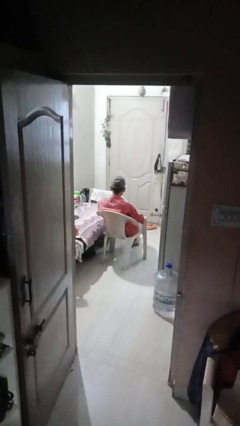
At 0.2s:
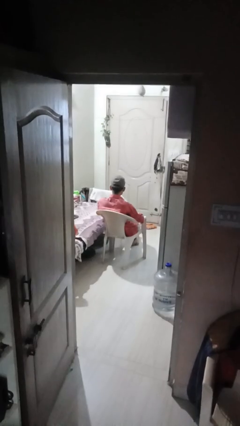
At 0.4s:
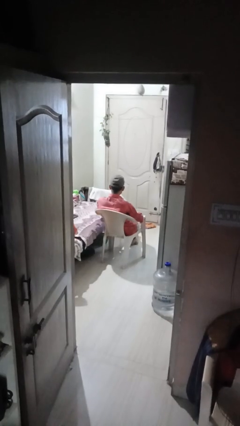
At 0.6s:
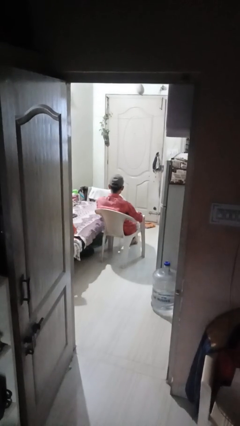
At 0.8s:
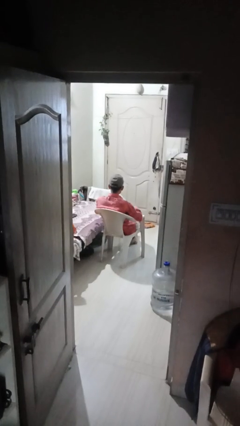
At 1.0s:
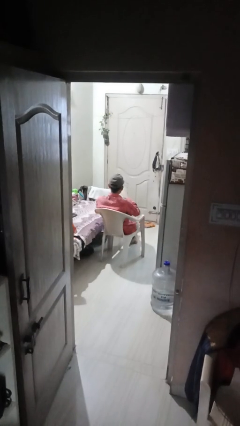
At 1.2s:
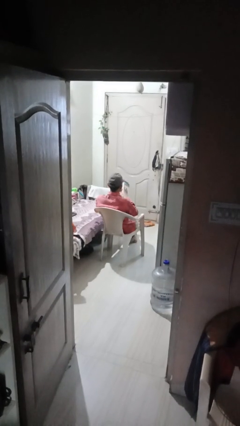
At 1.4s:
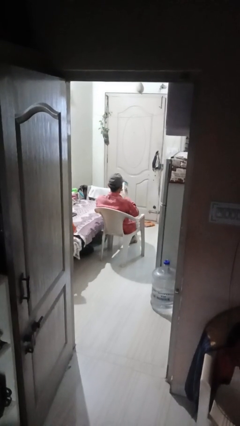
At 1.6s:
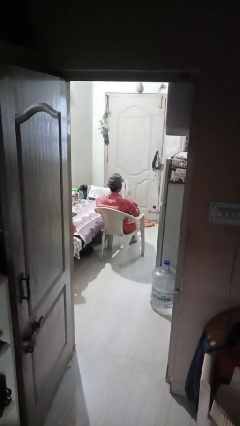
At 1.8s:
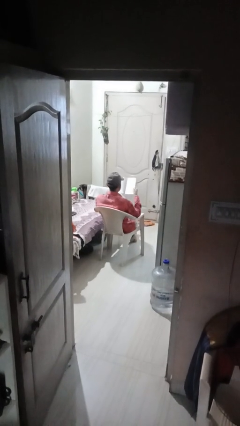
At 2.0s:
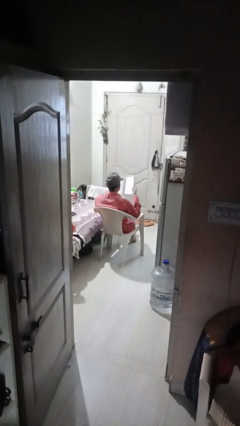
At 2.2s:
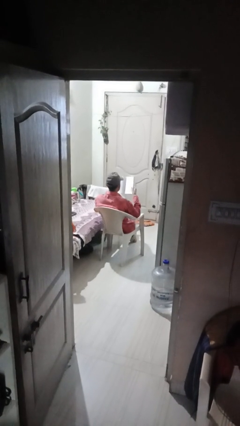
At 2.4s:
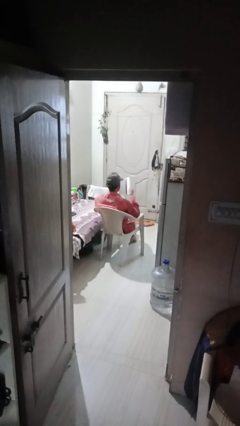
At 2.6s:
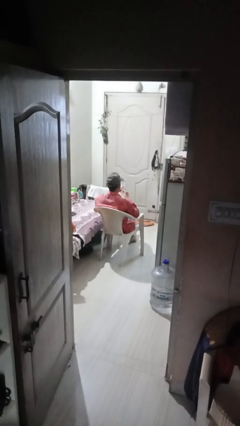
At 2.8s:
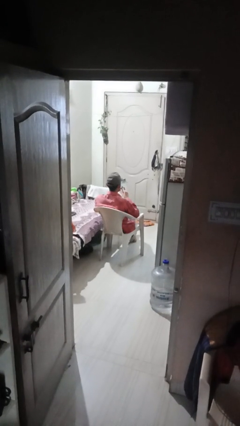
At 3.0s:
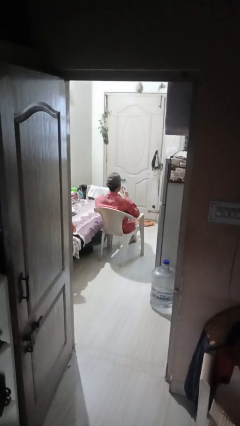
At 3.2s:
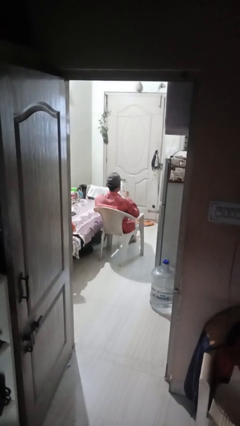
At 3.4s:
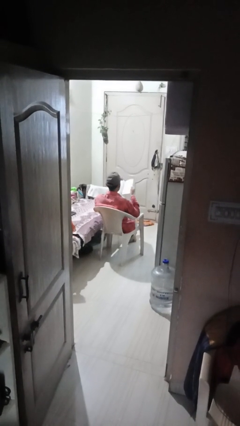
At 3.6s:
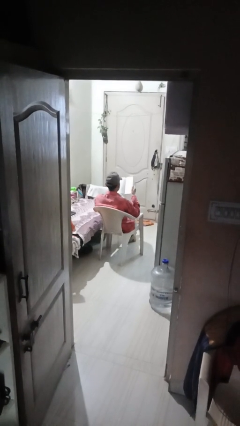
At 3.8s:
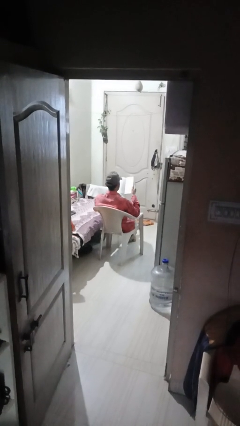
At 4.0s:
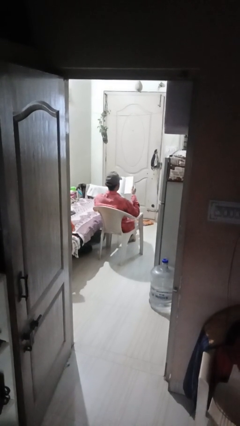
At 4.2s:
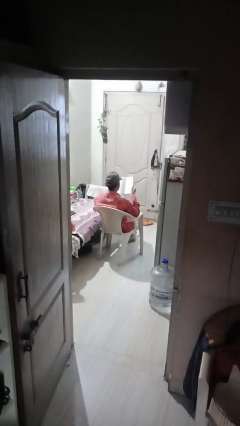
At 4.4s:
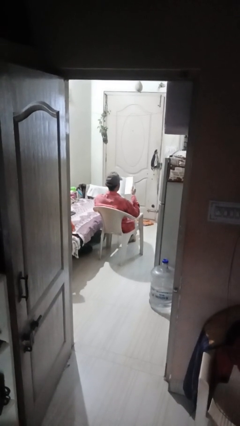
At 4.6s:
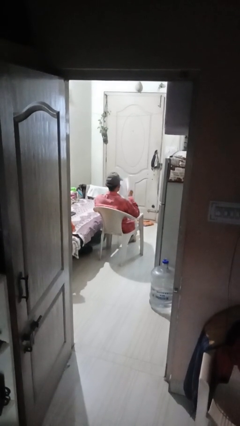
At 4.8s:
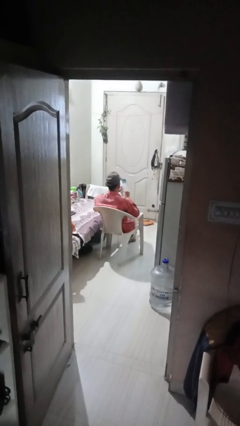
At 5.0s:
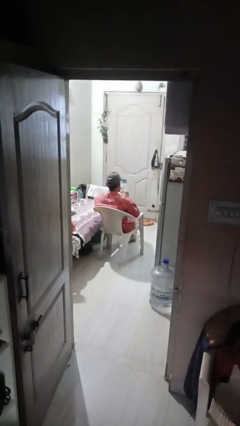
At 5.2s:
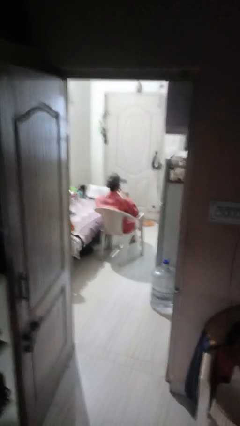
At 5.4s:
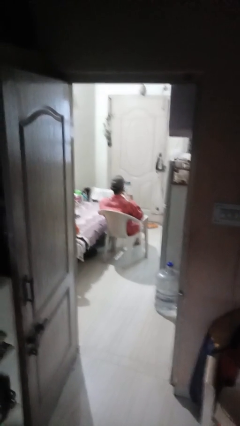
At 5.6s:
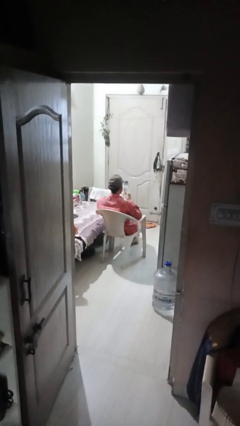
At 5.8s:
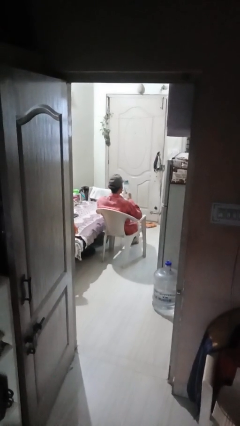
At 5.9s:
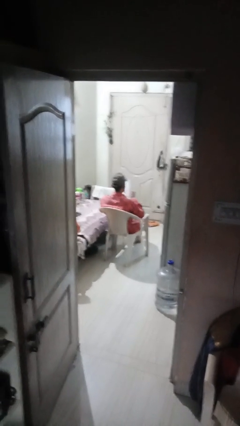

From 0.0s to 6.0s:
person reads book

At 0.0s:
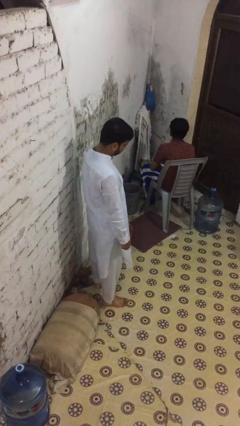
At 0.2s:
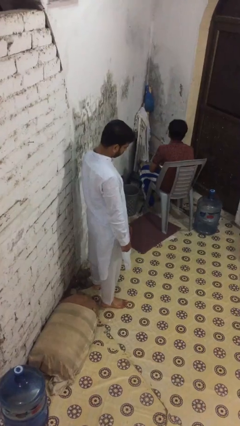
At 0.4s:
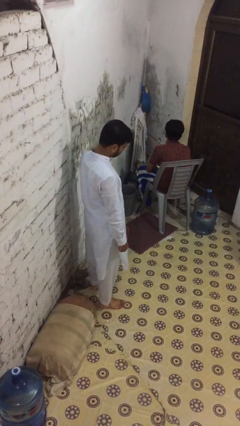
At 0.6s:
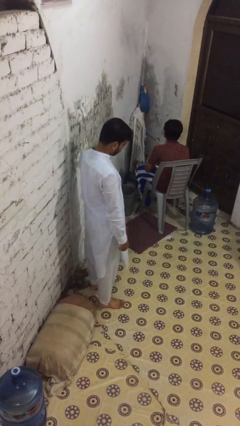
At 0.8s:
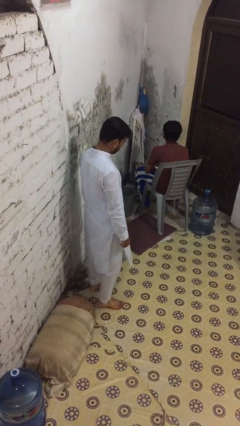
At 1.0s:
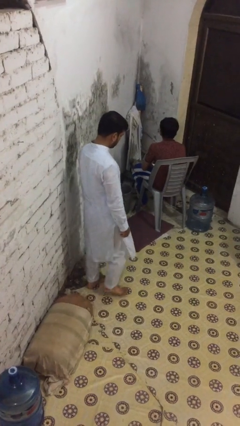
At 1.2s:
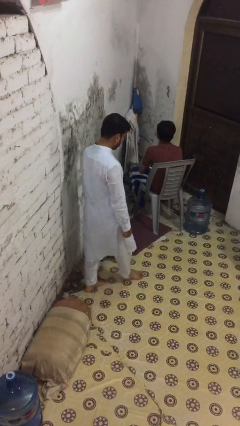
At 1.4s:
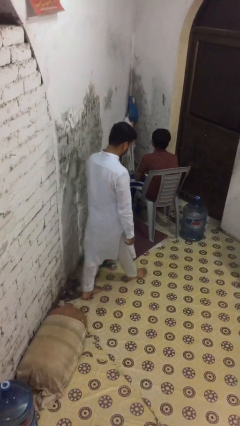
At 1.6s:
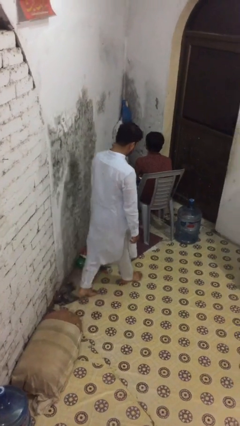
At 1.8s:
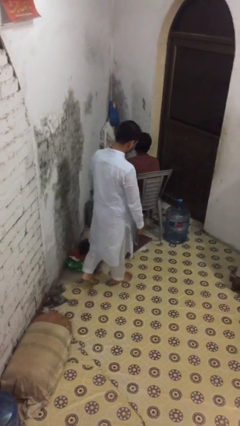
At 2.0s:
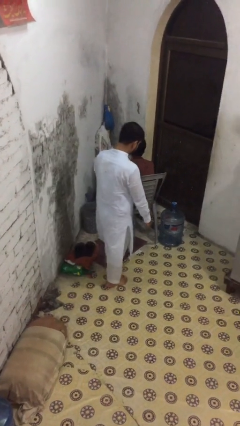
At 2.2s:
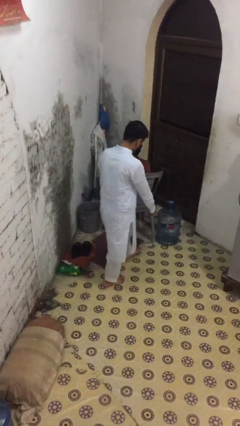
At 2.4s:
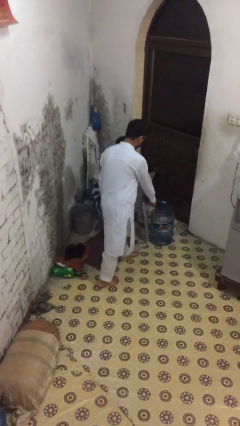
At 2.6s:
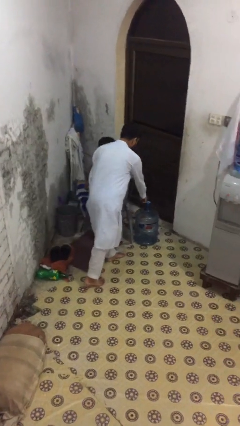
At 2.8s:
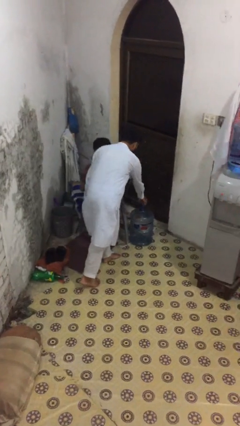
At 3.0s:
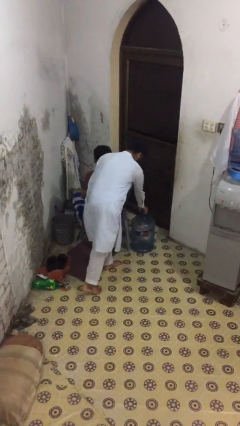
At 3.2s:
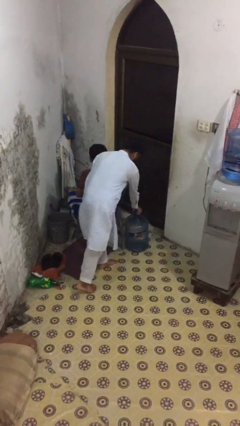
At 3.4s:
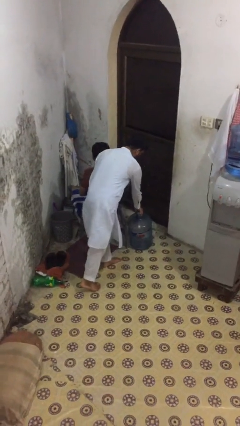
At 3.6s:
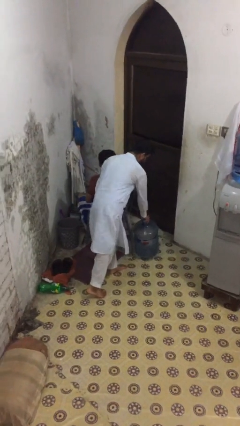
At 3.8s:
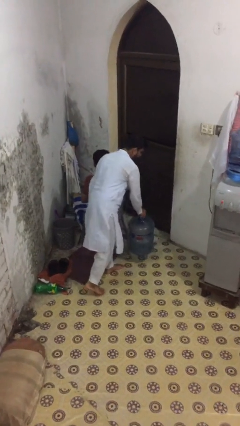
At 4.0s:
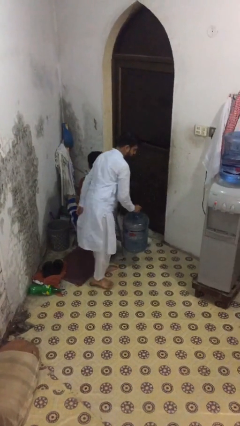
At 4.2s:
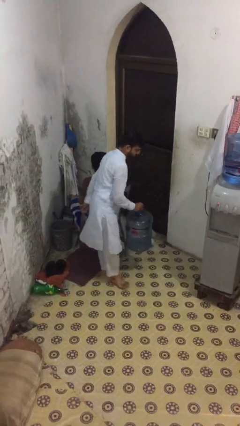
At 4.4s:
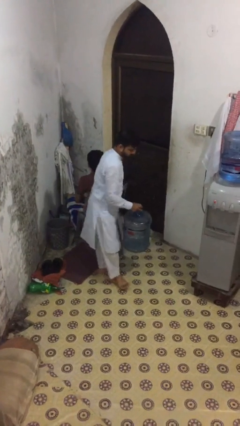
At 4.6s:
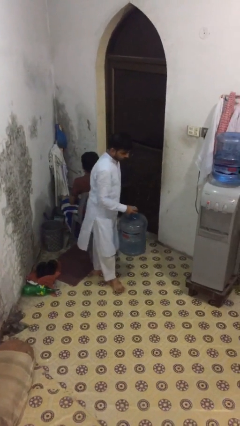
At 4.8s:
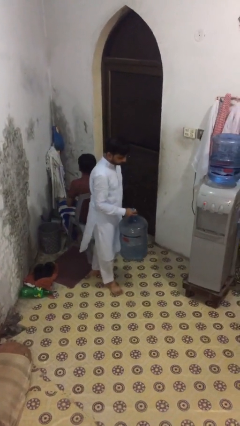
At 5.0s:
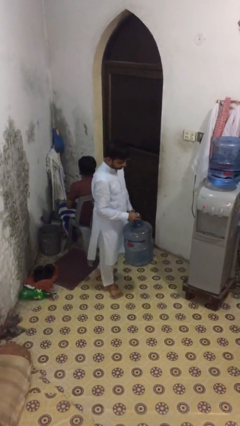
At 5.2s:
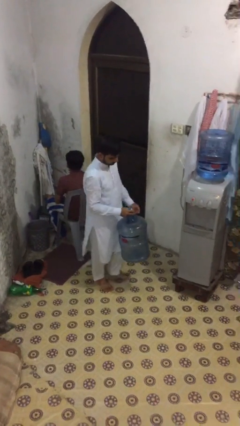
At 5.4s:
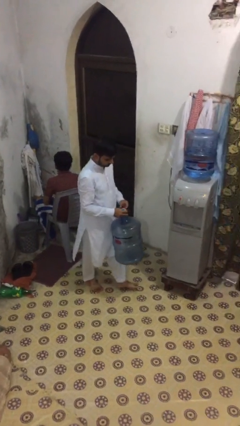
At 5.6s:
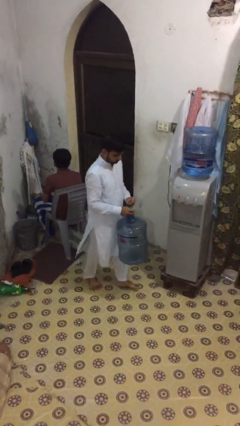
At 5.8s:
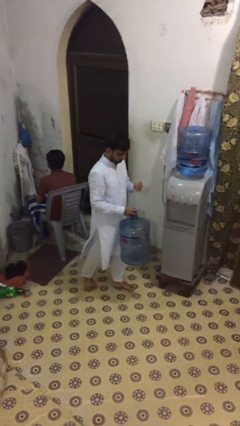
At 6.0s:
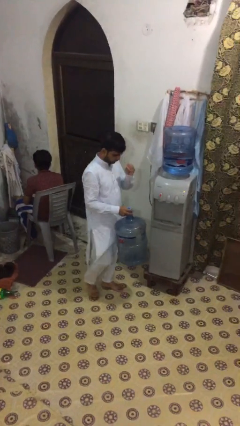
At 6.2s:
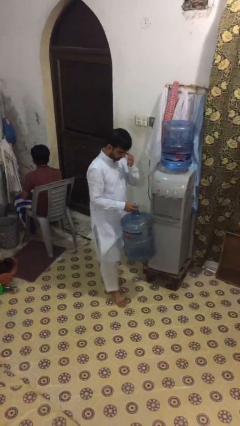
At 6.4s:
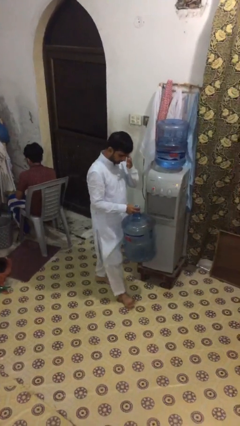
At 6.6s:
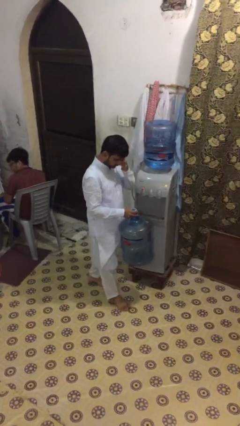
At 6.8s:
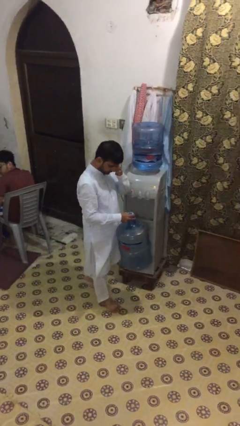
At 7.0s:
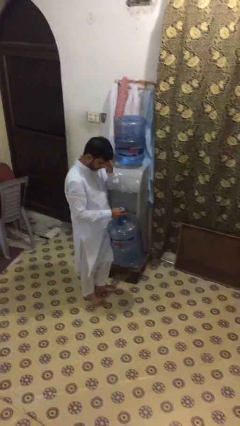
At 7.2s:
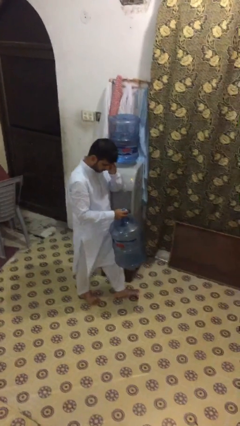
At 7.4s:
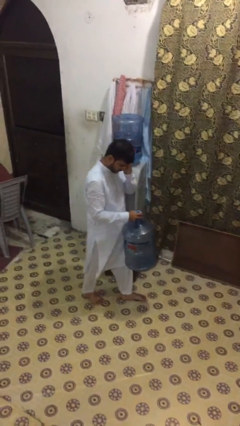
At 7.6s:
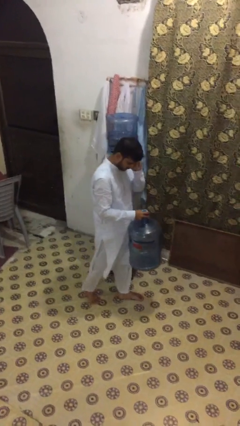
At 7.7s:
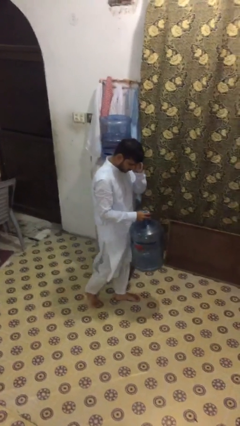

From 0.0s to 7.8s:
person steals object from person

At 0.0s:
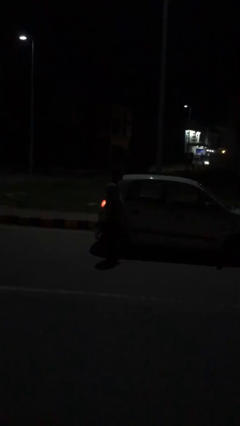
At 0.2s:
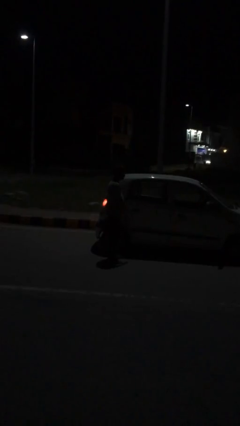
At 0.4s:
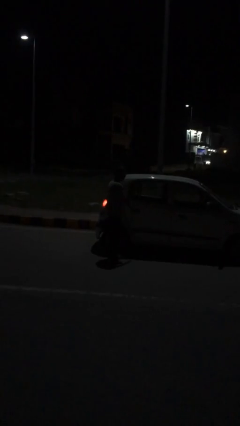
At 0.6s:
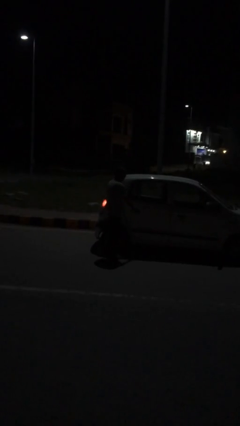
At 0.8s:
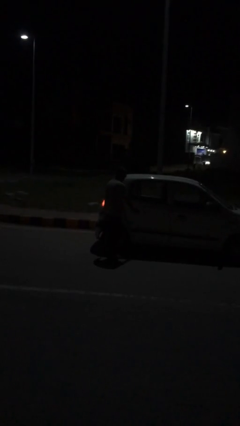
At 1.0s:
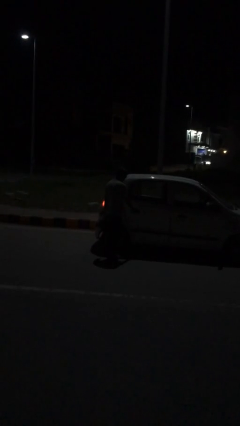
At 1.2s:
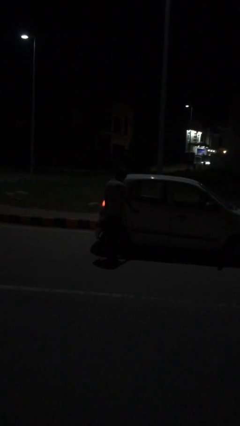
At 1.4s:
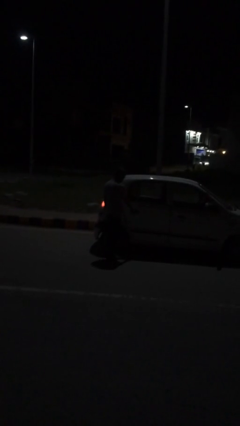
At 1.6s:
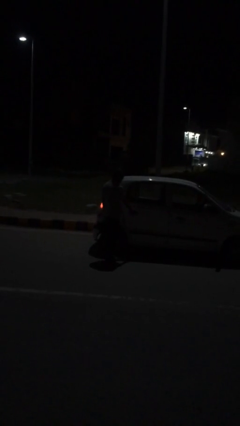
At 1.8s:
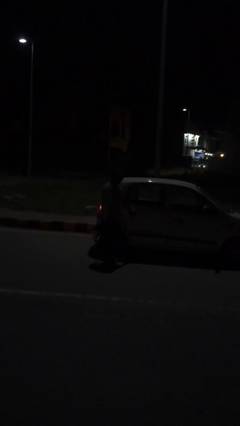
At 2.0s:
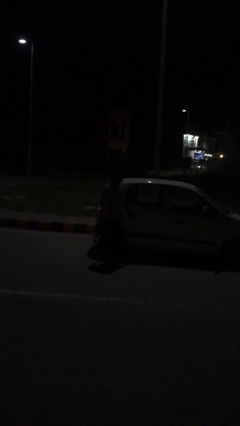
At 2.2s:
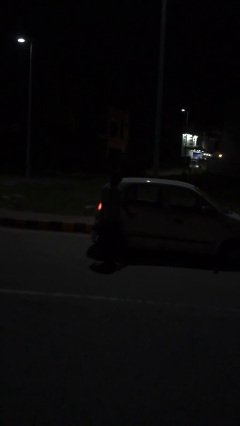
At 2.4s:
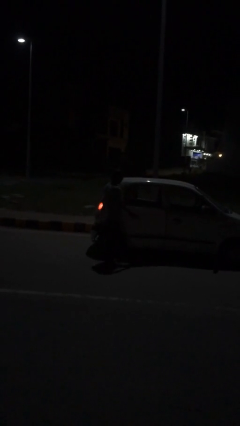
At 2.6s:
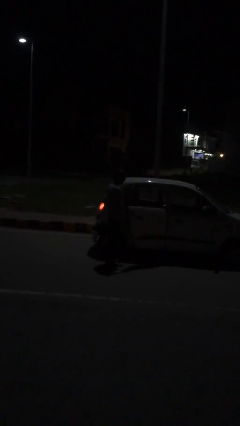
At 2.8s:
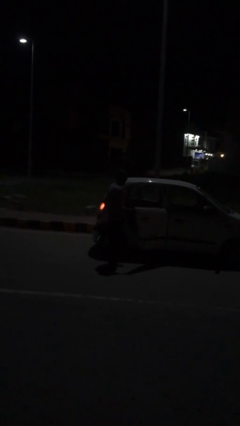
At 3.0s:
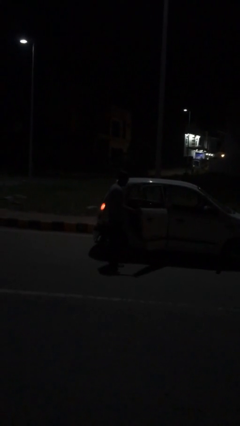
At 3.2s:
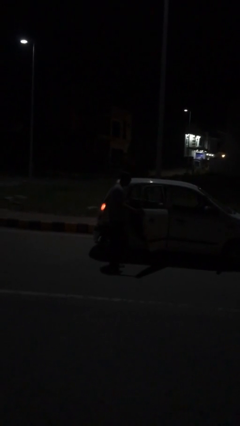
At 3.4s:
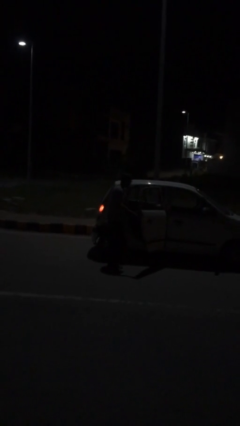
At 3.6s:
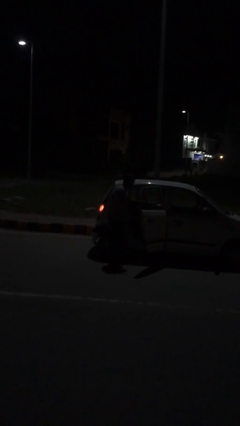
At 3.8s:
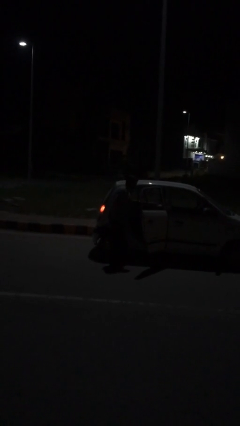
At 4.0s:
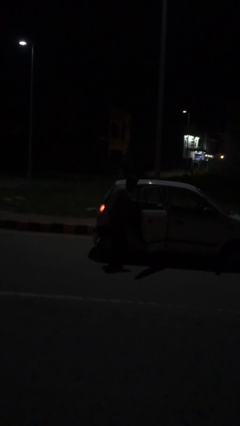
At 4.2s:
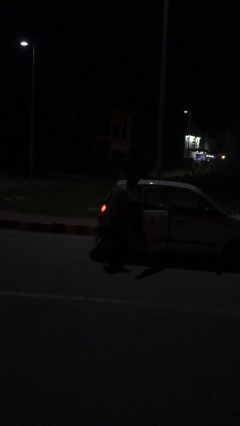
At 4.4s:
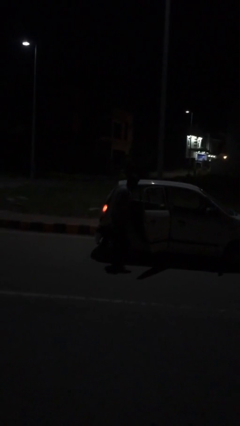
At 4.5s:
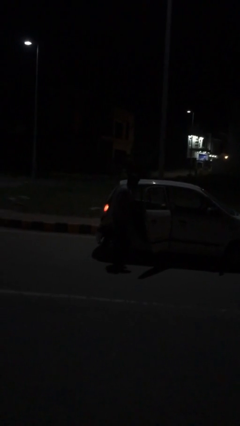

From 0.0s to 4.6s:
person opens car door
